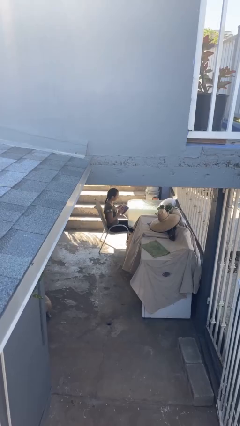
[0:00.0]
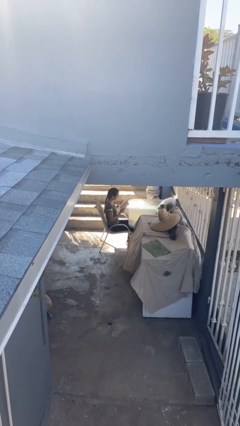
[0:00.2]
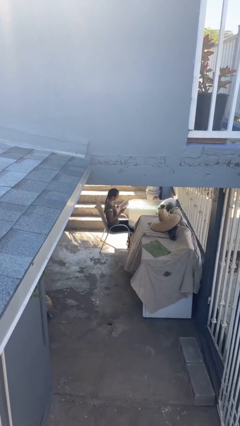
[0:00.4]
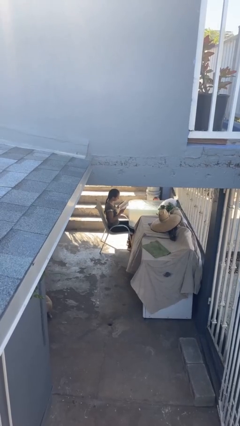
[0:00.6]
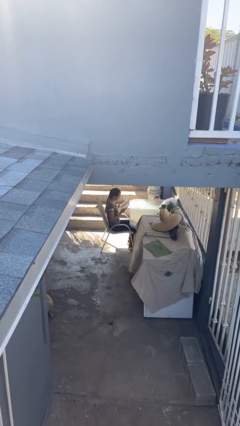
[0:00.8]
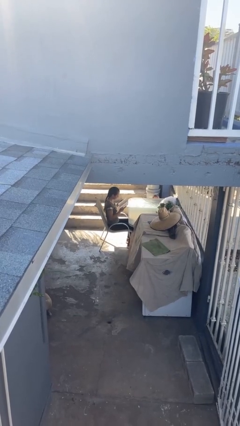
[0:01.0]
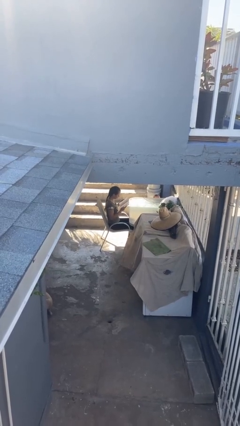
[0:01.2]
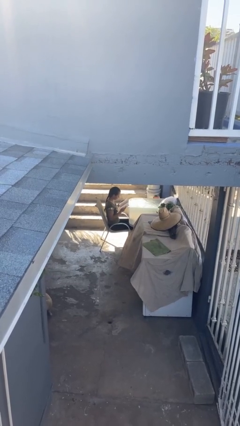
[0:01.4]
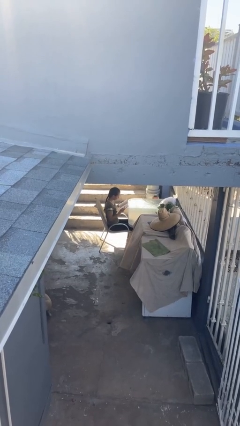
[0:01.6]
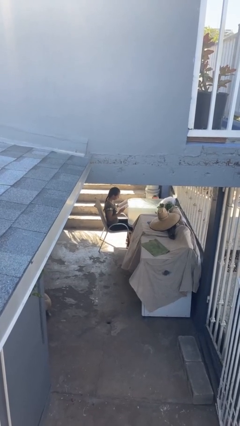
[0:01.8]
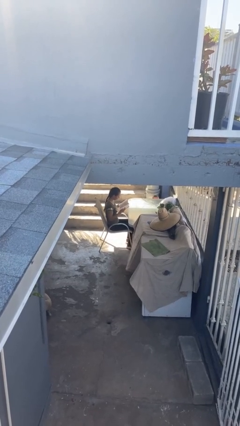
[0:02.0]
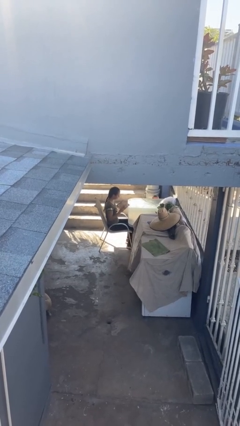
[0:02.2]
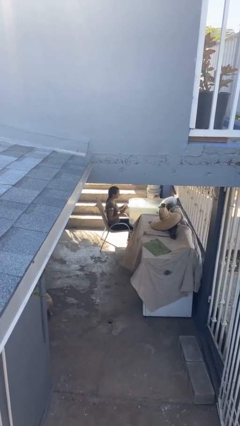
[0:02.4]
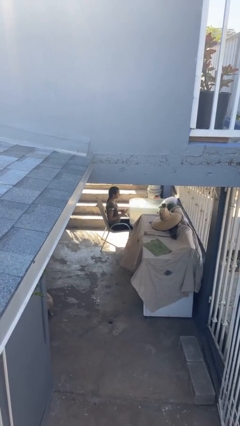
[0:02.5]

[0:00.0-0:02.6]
person reads document

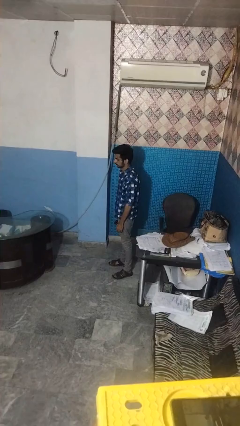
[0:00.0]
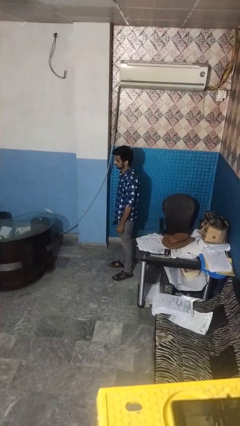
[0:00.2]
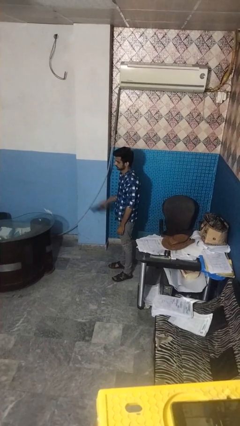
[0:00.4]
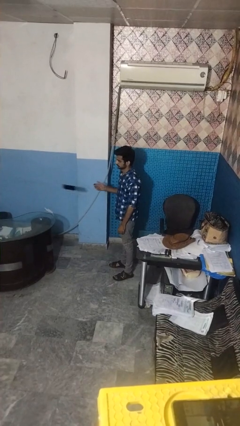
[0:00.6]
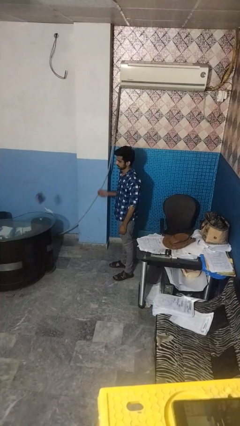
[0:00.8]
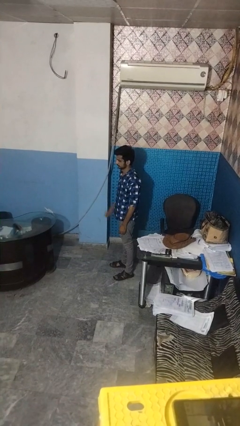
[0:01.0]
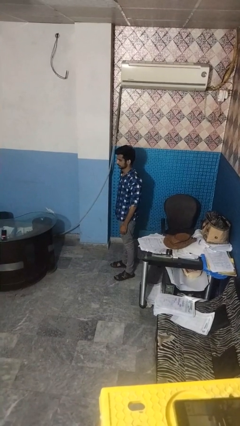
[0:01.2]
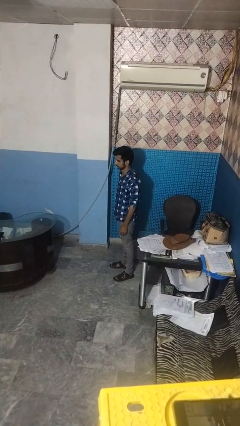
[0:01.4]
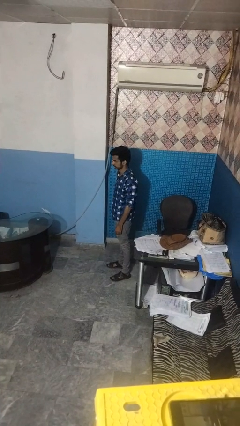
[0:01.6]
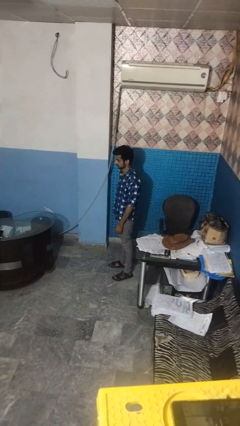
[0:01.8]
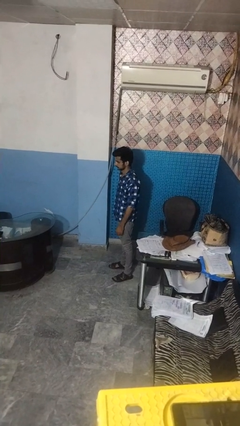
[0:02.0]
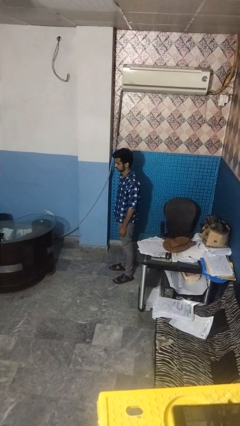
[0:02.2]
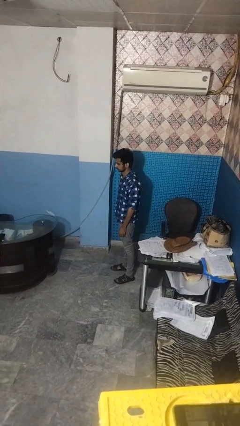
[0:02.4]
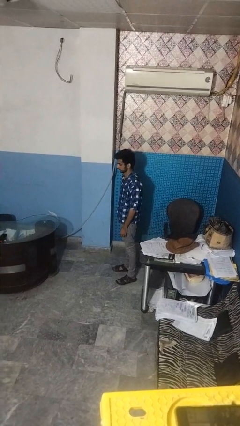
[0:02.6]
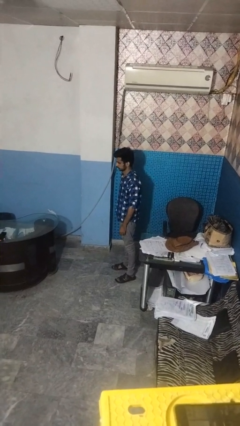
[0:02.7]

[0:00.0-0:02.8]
person throws object on table

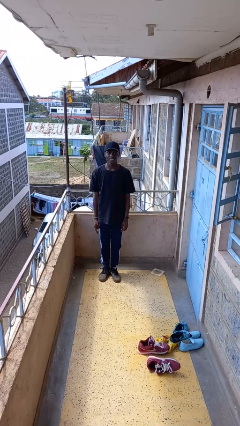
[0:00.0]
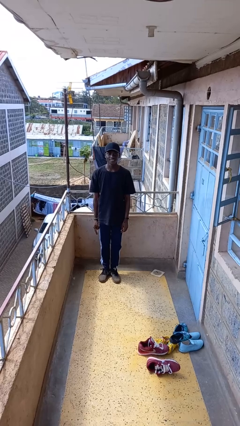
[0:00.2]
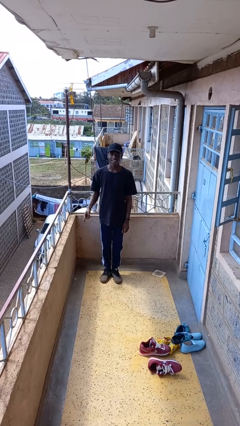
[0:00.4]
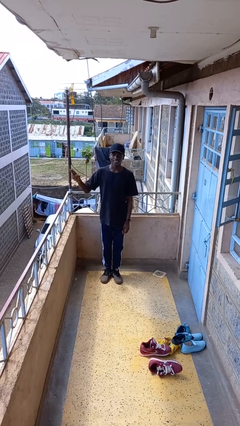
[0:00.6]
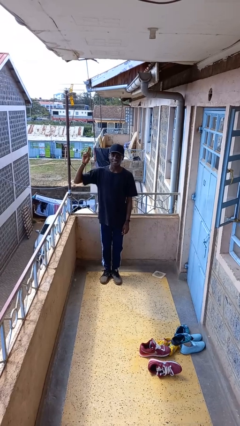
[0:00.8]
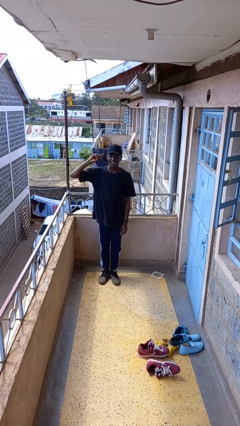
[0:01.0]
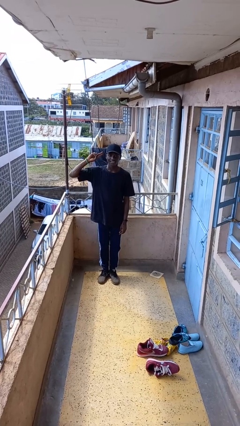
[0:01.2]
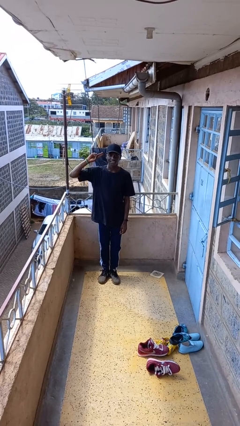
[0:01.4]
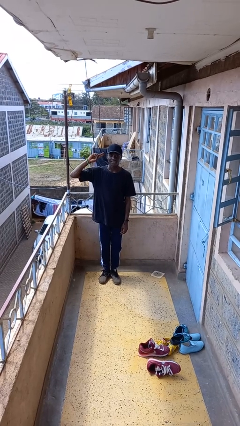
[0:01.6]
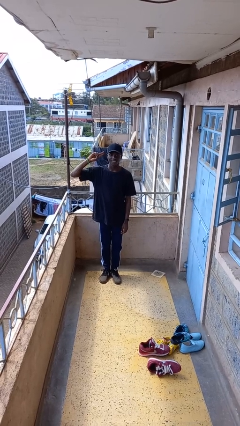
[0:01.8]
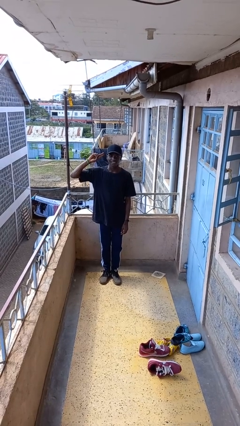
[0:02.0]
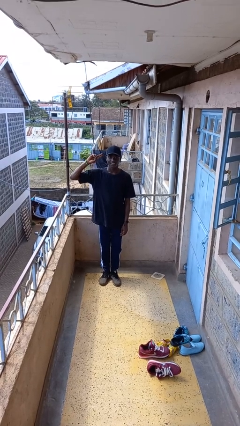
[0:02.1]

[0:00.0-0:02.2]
person salutes

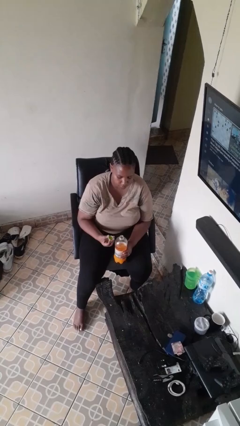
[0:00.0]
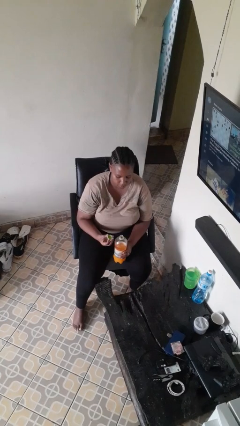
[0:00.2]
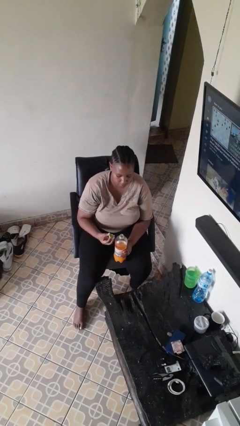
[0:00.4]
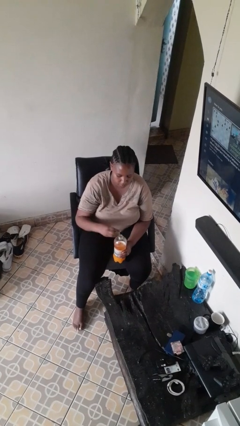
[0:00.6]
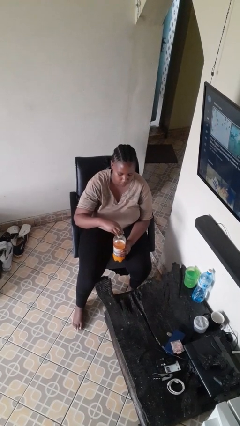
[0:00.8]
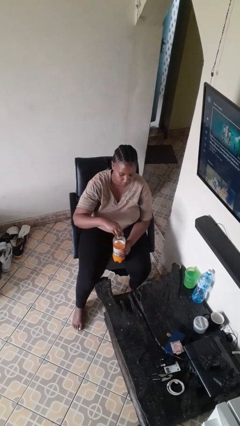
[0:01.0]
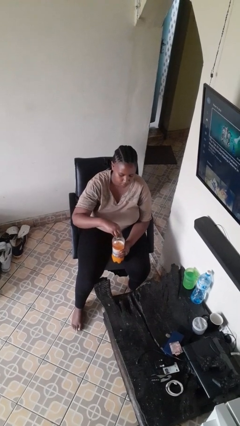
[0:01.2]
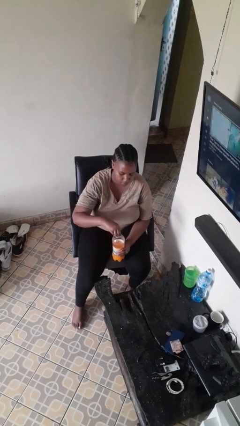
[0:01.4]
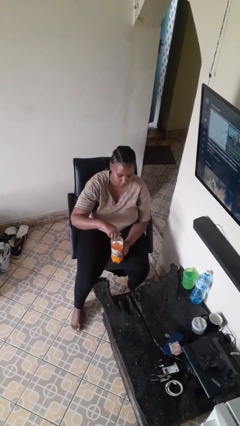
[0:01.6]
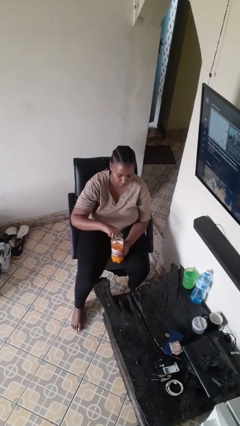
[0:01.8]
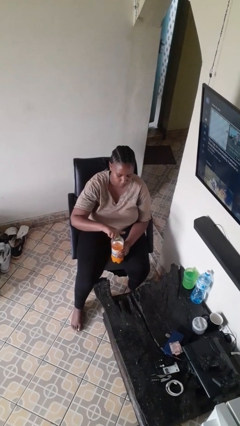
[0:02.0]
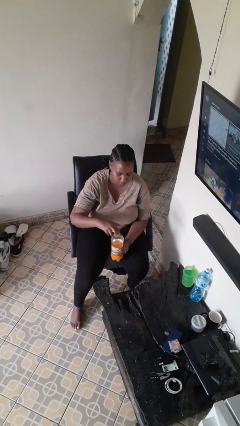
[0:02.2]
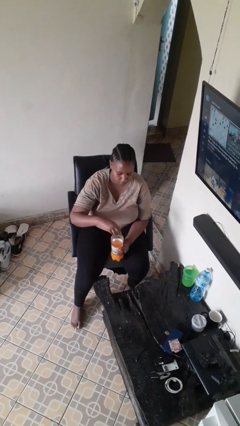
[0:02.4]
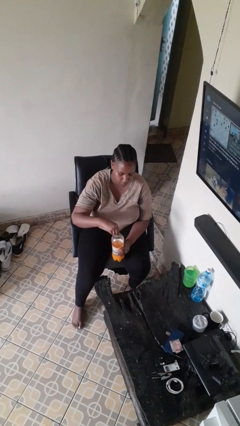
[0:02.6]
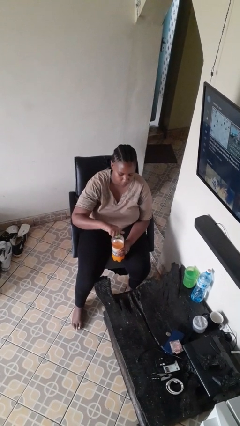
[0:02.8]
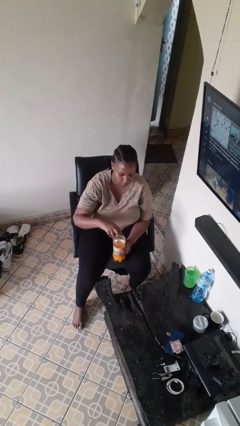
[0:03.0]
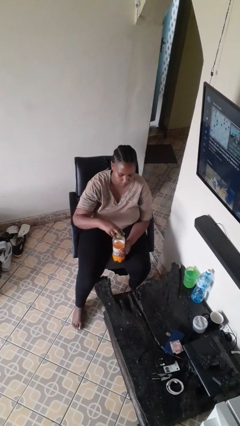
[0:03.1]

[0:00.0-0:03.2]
person screws lid to bottle

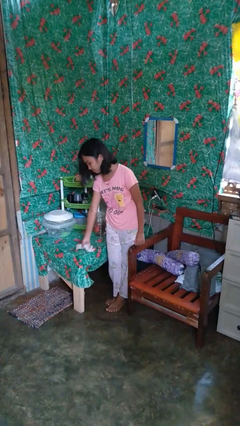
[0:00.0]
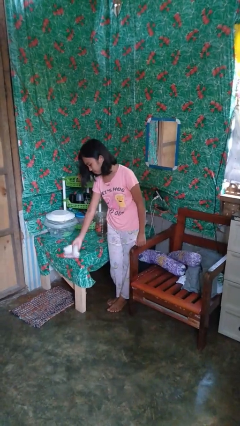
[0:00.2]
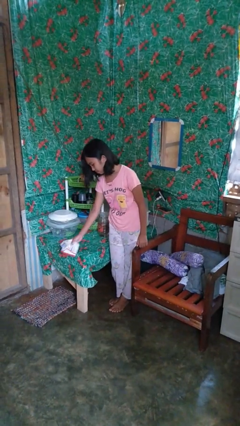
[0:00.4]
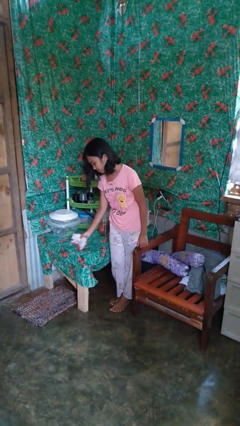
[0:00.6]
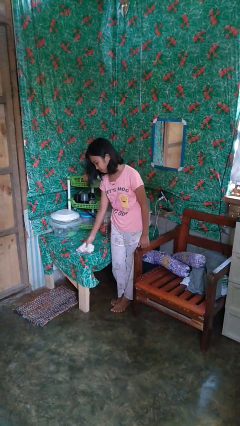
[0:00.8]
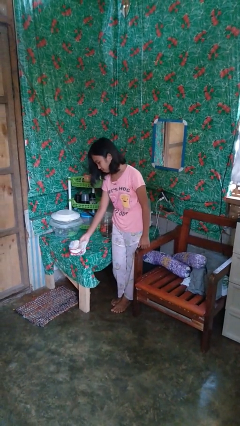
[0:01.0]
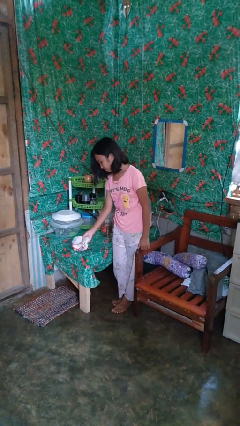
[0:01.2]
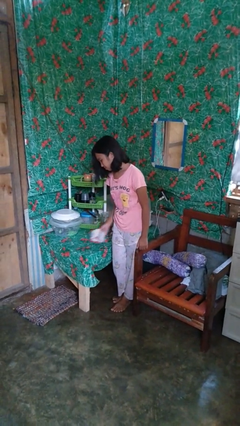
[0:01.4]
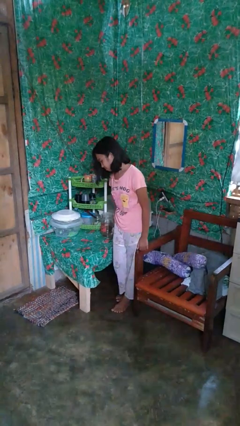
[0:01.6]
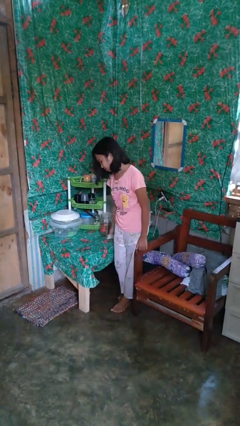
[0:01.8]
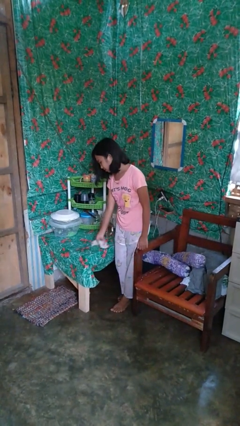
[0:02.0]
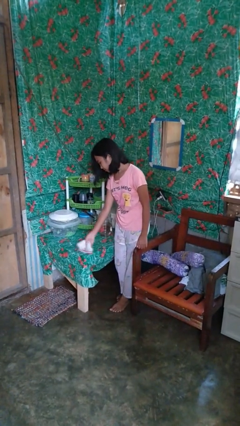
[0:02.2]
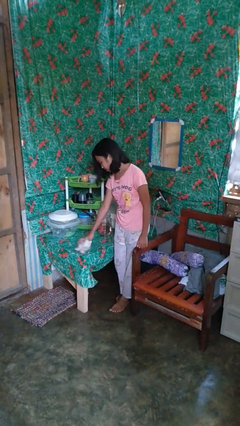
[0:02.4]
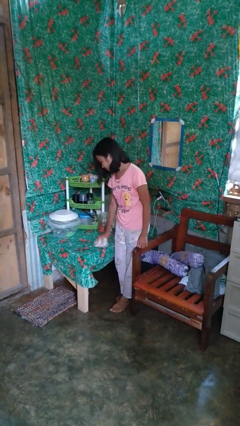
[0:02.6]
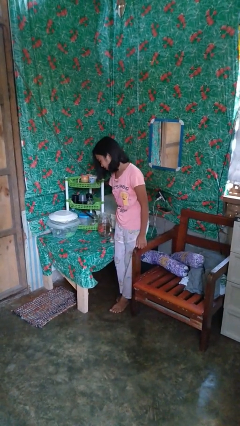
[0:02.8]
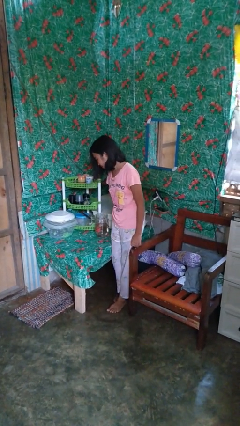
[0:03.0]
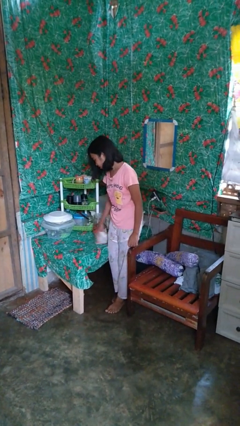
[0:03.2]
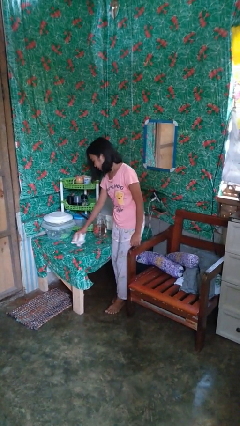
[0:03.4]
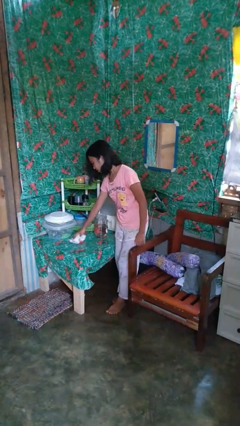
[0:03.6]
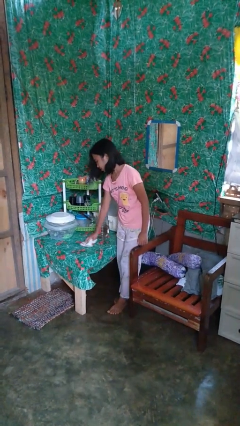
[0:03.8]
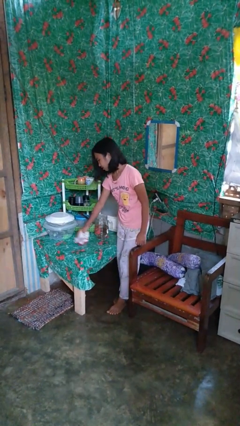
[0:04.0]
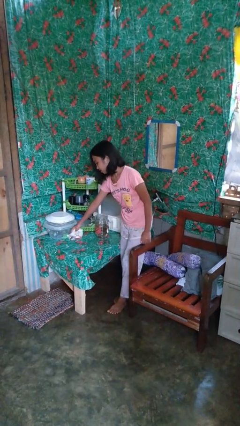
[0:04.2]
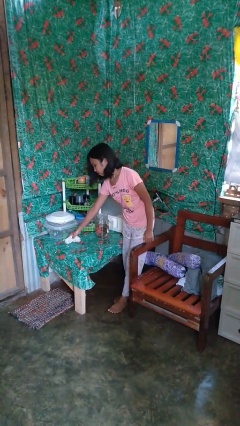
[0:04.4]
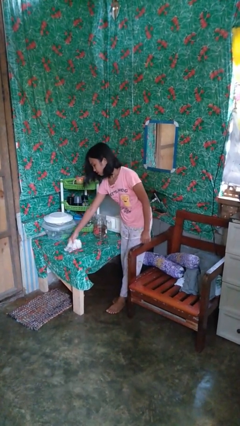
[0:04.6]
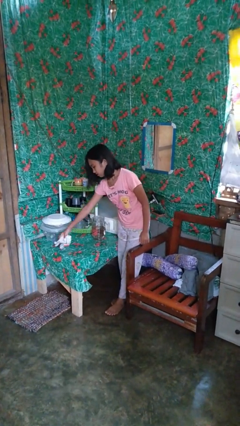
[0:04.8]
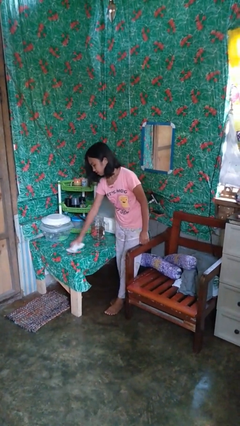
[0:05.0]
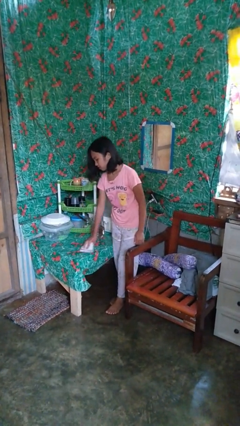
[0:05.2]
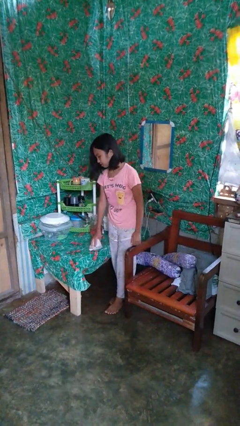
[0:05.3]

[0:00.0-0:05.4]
person cleans table with rag

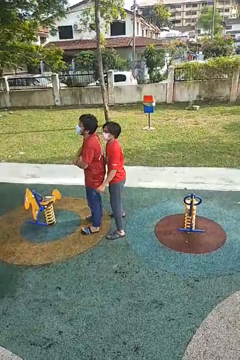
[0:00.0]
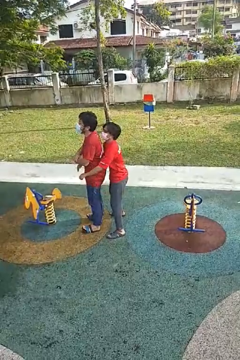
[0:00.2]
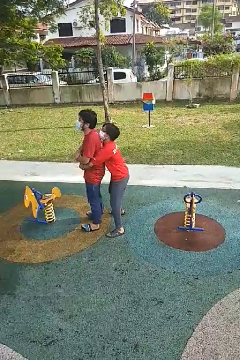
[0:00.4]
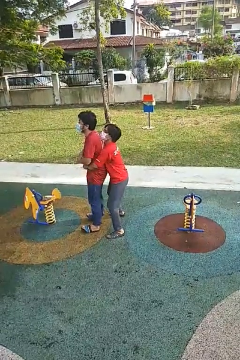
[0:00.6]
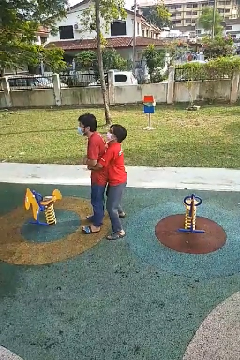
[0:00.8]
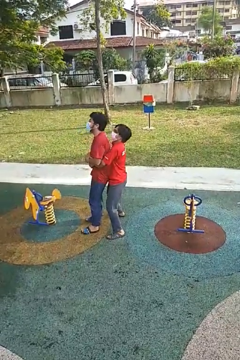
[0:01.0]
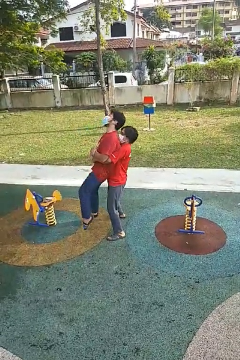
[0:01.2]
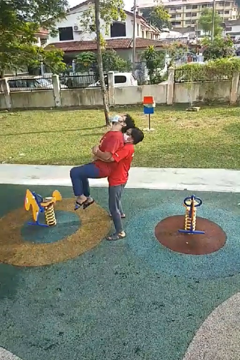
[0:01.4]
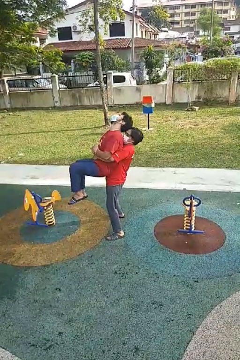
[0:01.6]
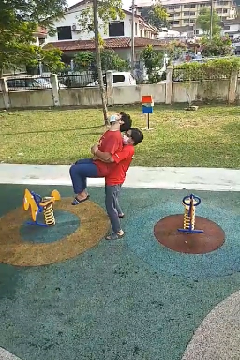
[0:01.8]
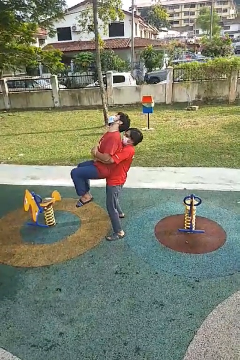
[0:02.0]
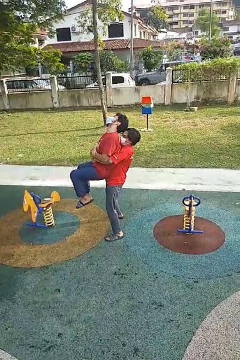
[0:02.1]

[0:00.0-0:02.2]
person picks up person
